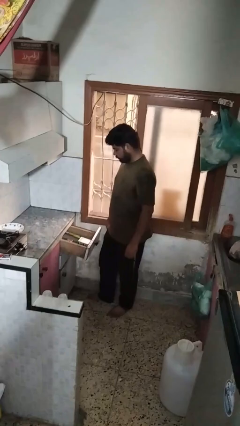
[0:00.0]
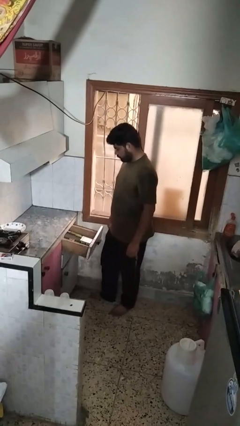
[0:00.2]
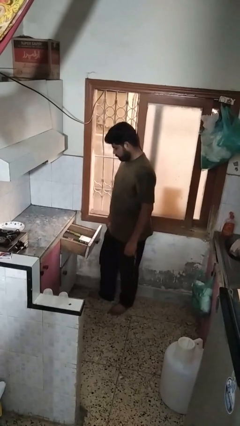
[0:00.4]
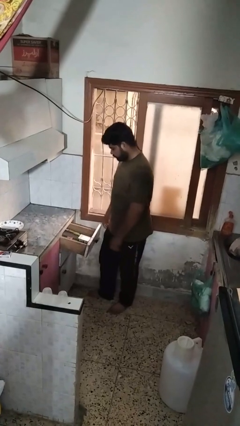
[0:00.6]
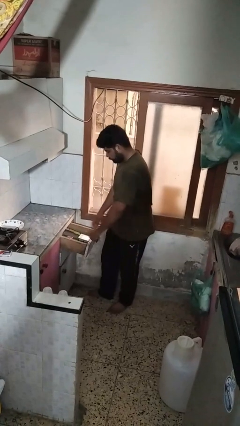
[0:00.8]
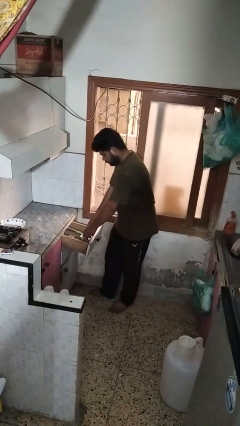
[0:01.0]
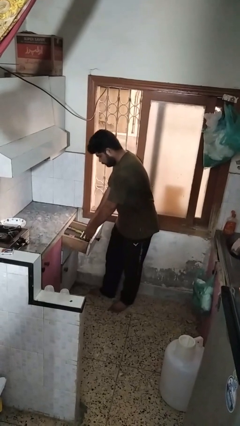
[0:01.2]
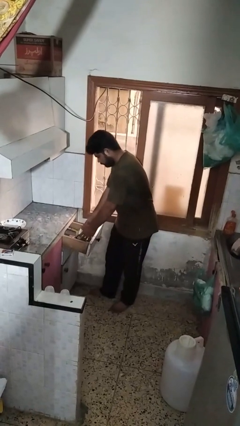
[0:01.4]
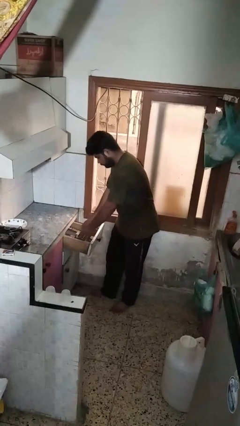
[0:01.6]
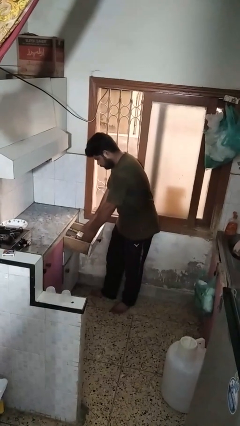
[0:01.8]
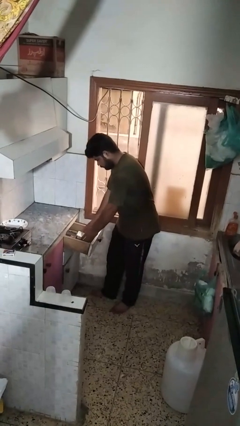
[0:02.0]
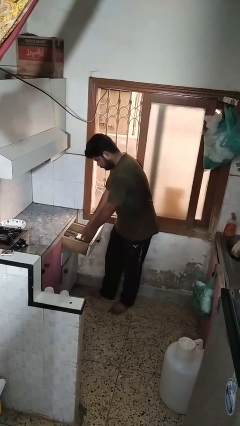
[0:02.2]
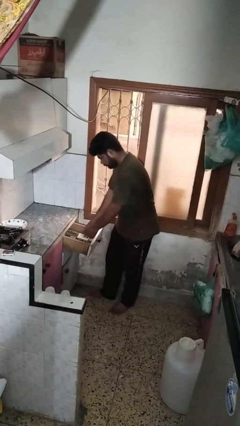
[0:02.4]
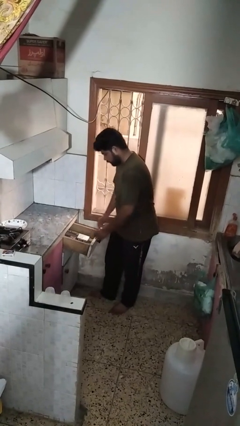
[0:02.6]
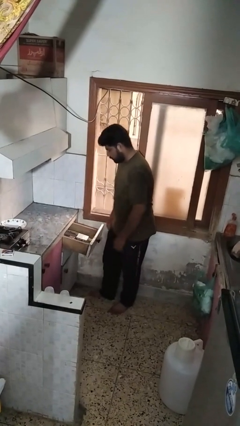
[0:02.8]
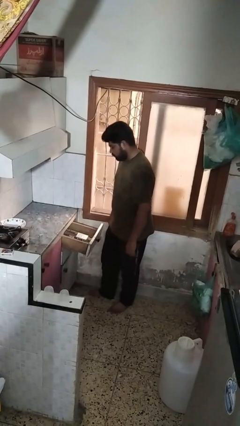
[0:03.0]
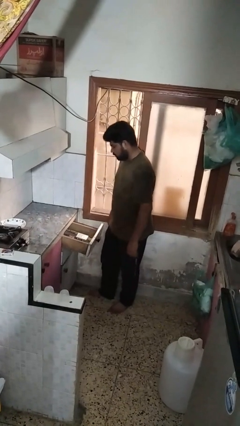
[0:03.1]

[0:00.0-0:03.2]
person searches in kitchen drawer

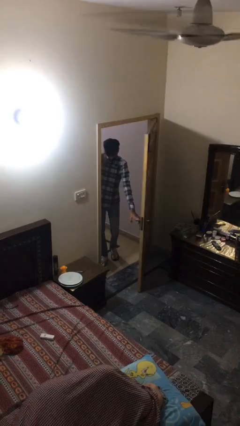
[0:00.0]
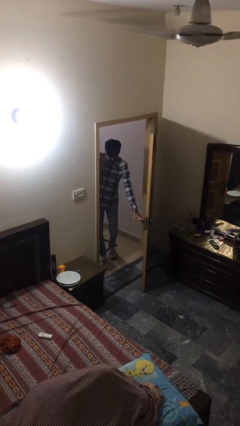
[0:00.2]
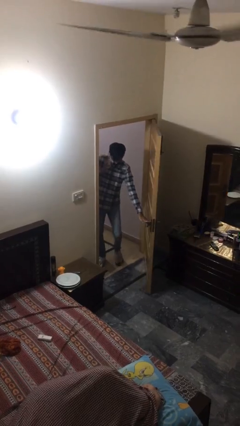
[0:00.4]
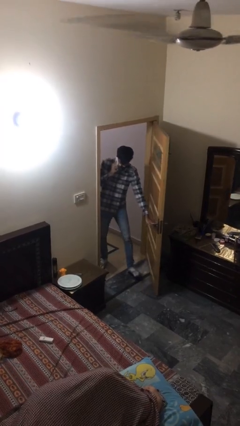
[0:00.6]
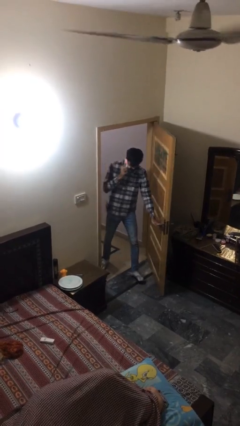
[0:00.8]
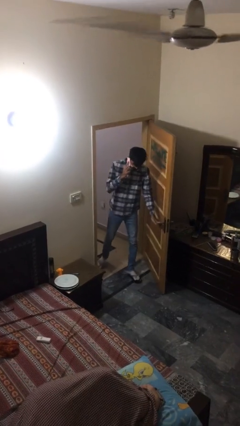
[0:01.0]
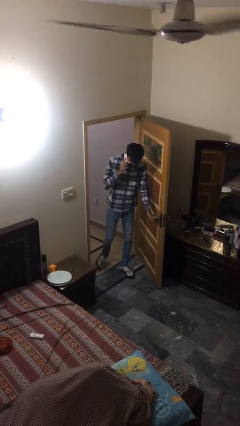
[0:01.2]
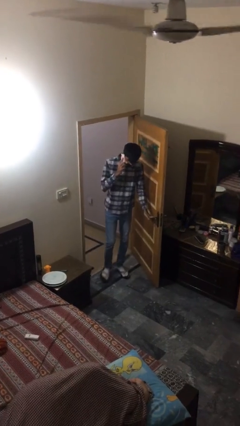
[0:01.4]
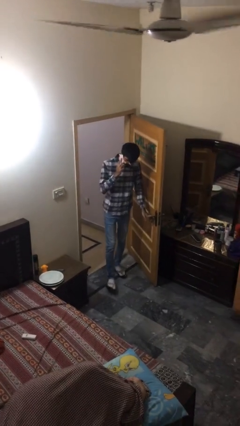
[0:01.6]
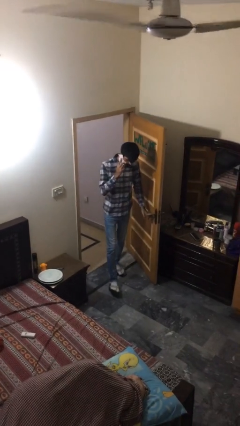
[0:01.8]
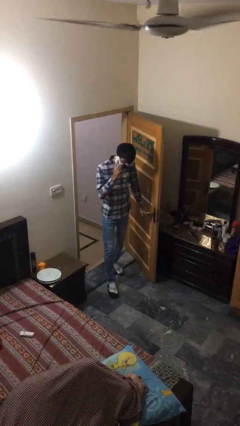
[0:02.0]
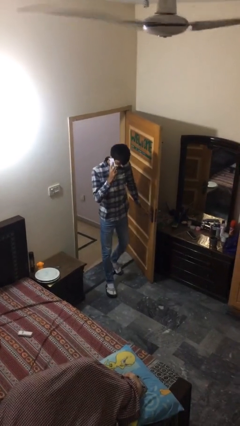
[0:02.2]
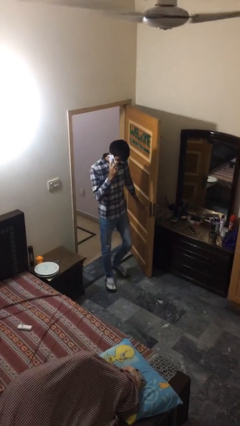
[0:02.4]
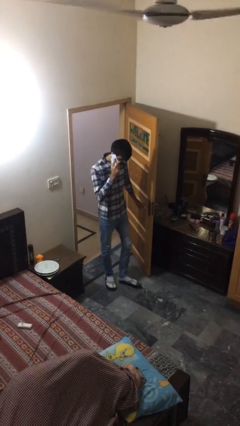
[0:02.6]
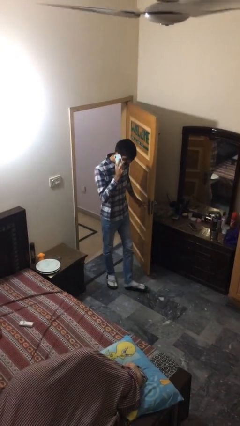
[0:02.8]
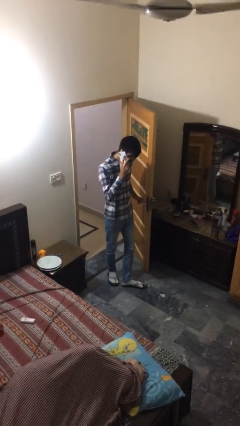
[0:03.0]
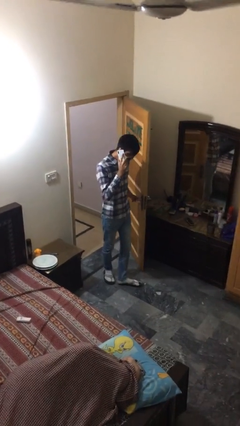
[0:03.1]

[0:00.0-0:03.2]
person enters scene through structure

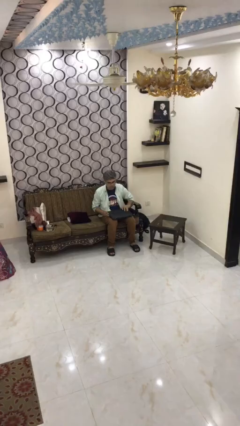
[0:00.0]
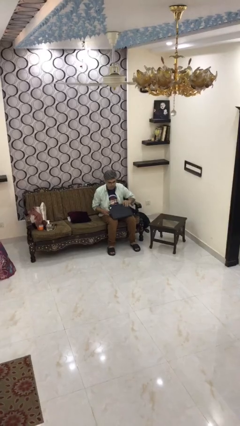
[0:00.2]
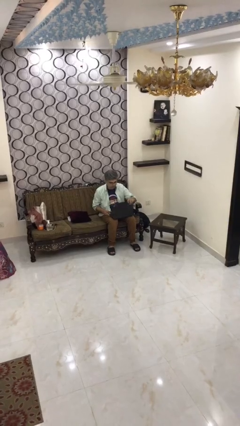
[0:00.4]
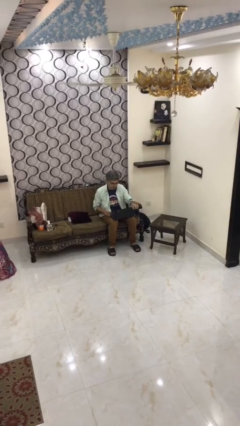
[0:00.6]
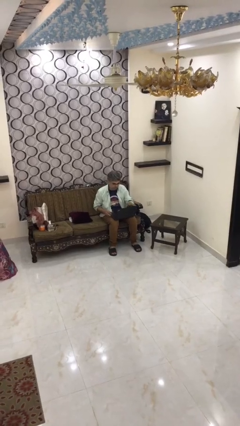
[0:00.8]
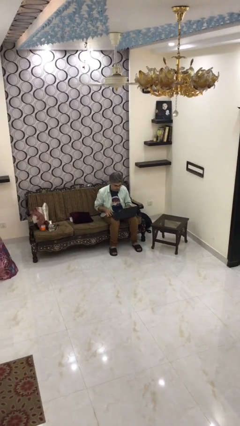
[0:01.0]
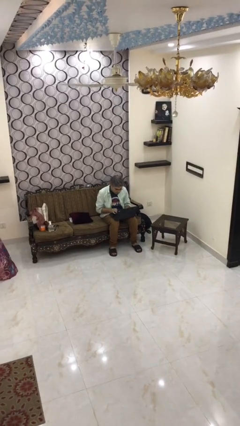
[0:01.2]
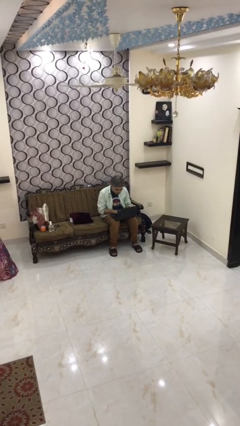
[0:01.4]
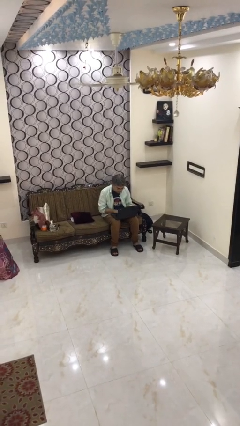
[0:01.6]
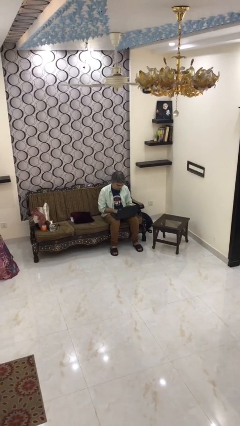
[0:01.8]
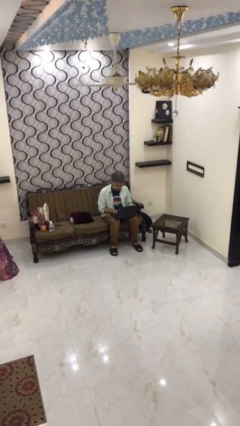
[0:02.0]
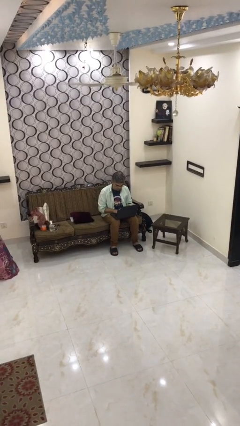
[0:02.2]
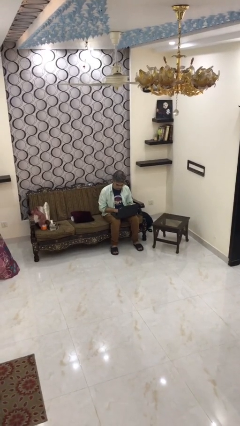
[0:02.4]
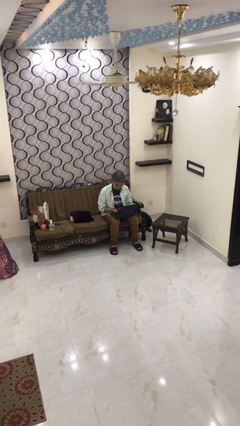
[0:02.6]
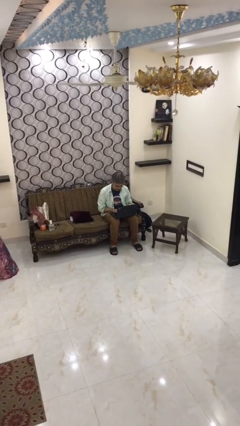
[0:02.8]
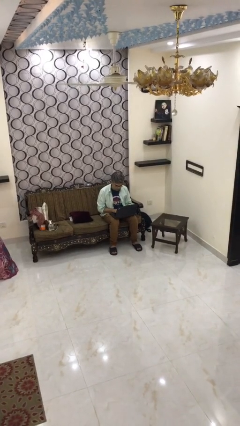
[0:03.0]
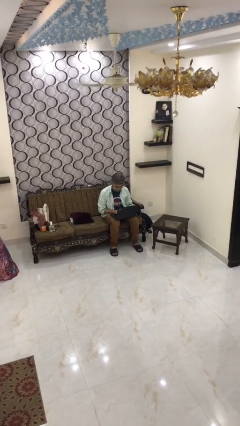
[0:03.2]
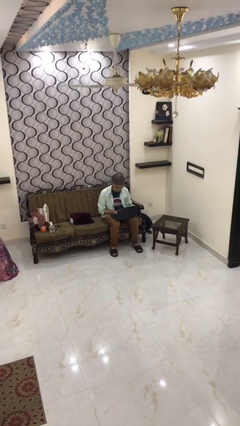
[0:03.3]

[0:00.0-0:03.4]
person interacts with laptop

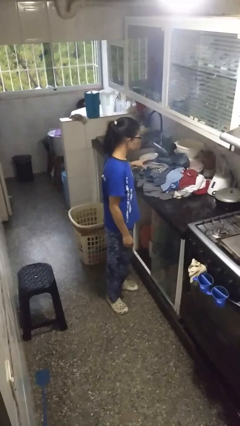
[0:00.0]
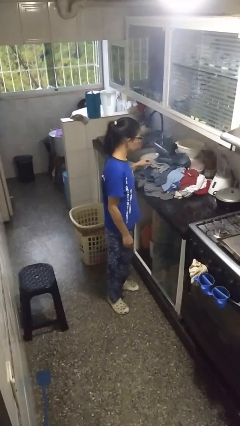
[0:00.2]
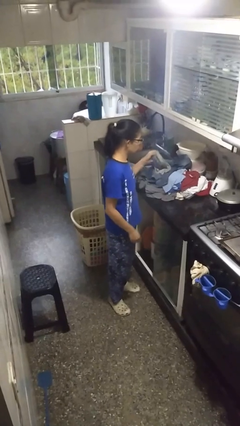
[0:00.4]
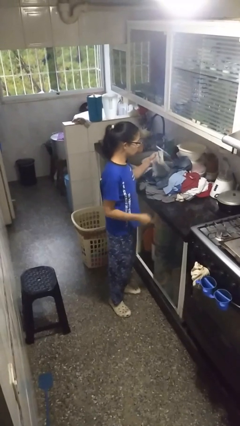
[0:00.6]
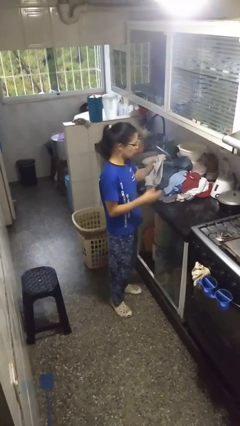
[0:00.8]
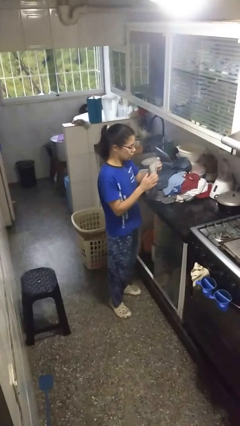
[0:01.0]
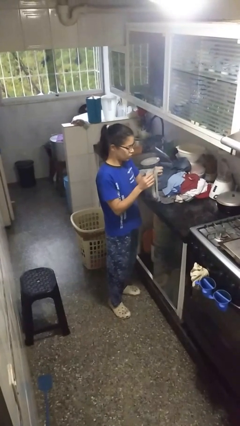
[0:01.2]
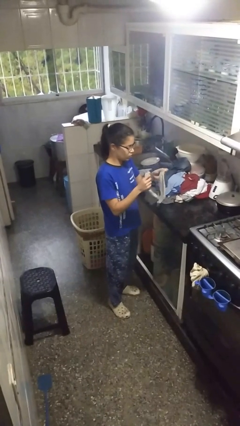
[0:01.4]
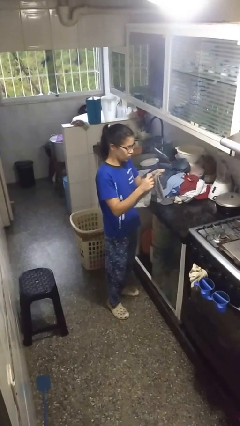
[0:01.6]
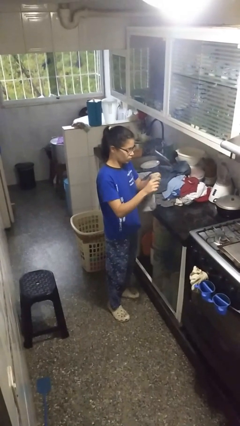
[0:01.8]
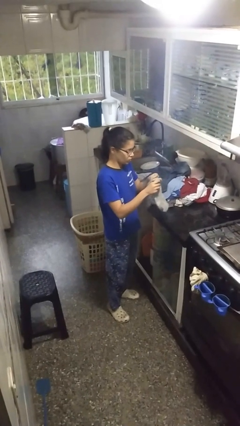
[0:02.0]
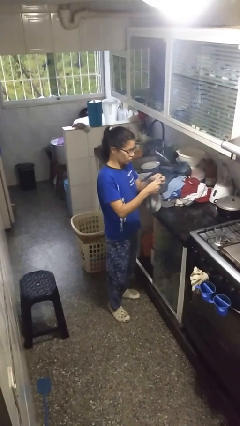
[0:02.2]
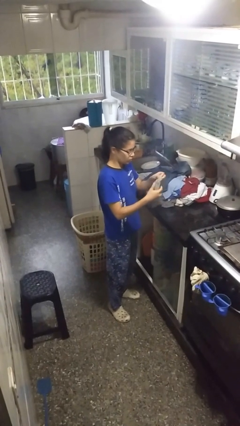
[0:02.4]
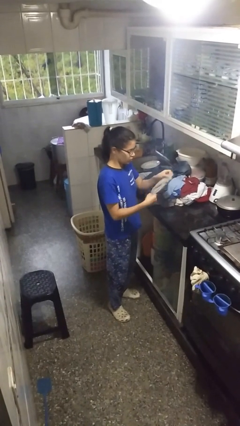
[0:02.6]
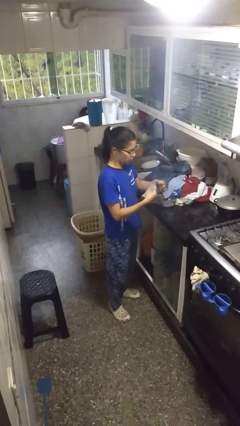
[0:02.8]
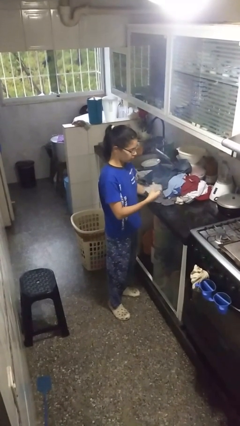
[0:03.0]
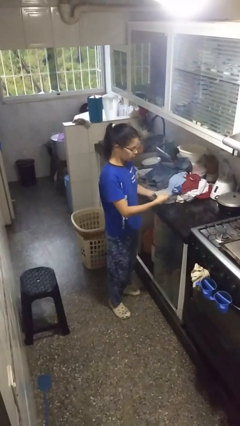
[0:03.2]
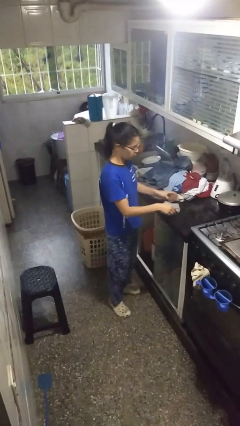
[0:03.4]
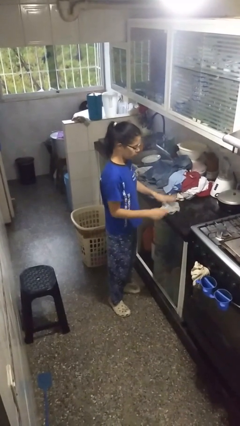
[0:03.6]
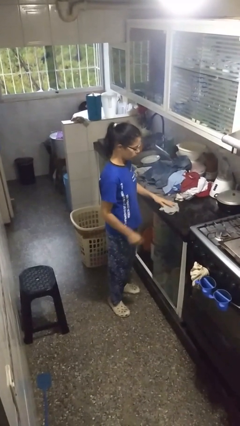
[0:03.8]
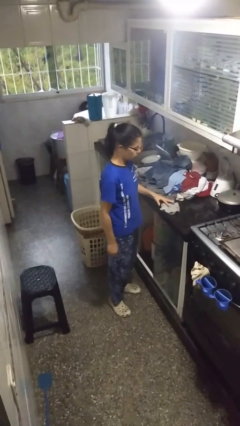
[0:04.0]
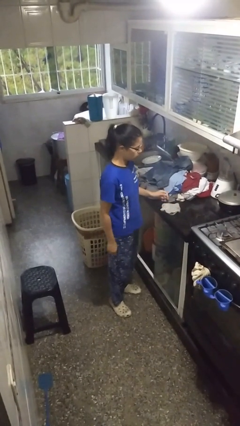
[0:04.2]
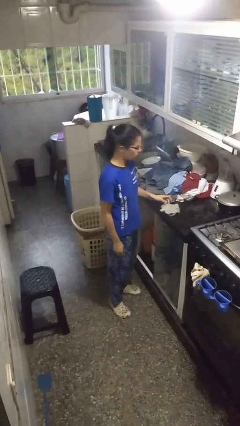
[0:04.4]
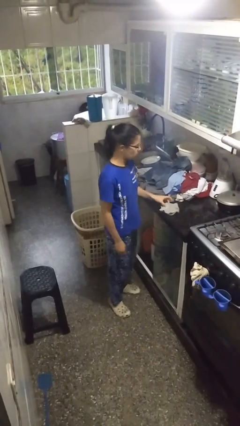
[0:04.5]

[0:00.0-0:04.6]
person folds socks

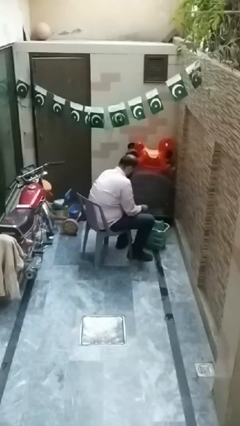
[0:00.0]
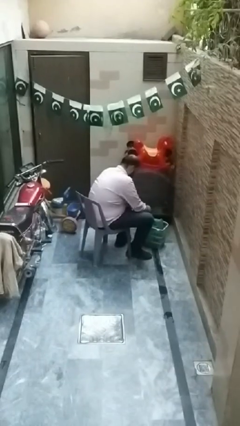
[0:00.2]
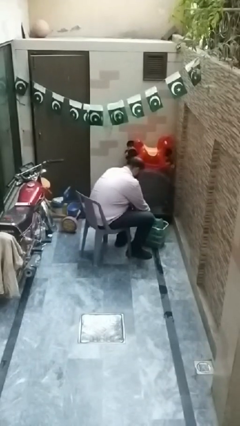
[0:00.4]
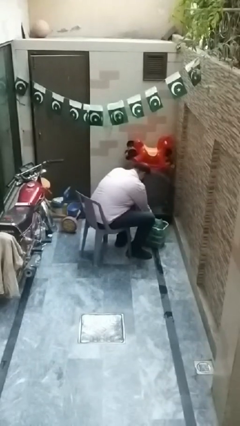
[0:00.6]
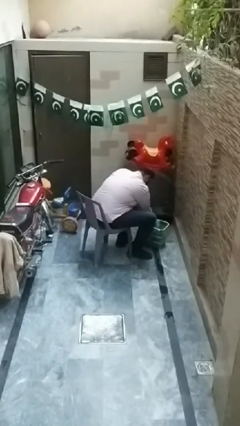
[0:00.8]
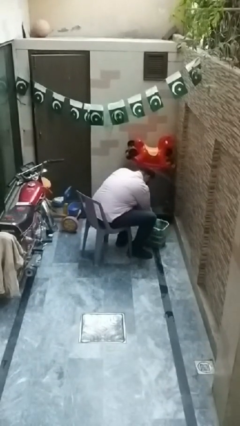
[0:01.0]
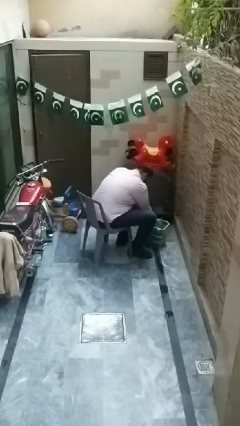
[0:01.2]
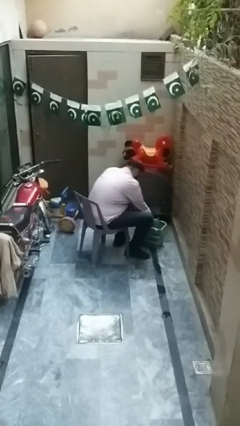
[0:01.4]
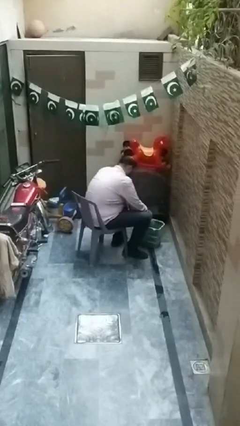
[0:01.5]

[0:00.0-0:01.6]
person takes object from basket

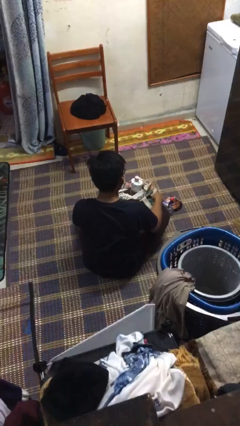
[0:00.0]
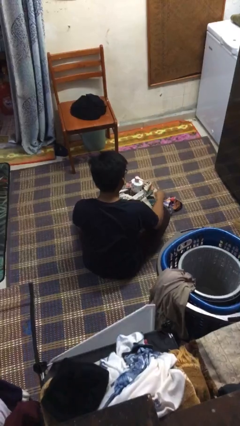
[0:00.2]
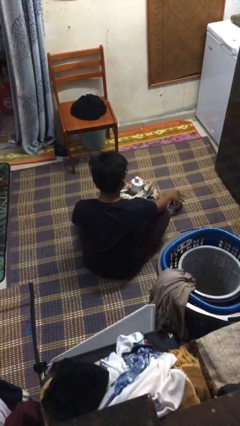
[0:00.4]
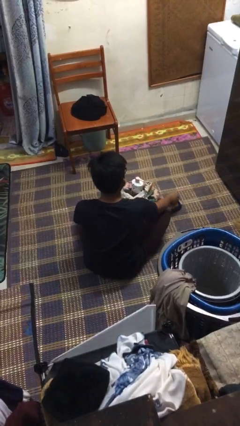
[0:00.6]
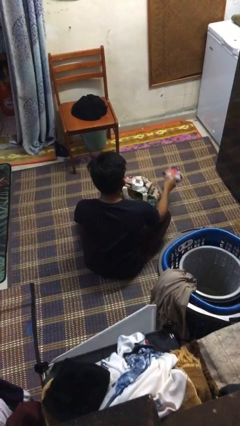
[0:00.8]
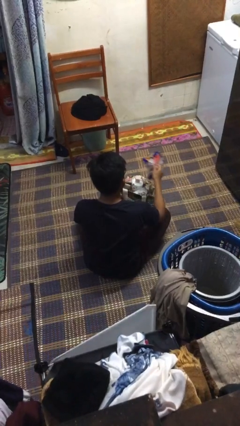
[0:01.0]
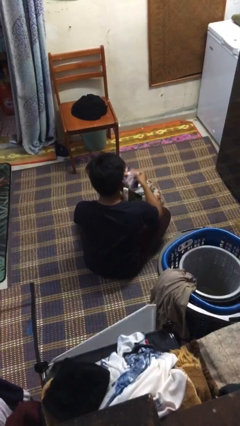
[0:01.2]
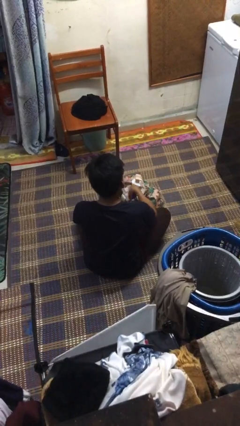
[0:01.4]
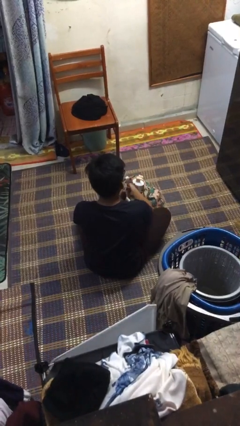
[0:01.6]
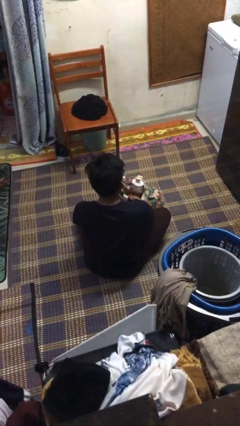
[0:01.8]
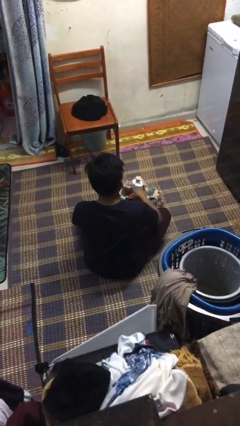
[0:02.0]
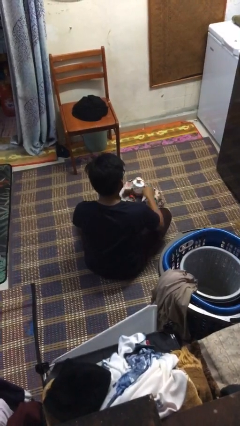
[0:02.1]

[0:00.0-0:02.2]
person puts object into bag
